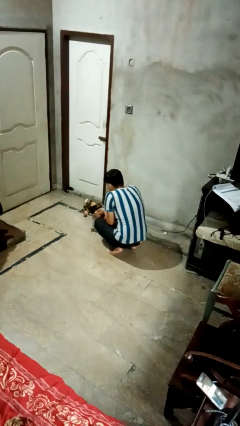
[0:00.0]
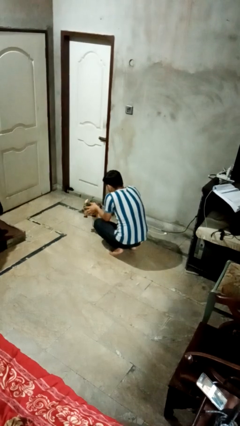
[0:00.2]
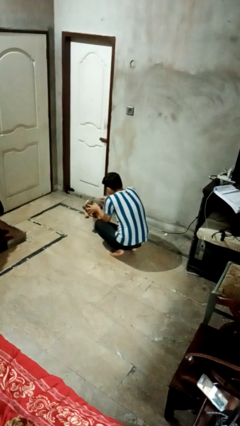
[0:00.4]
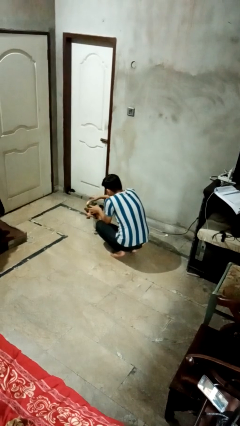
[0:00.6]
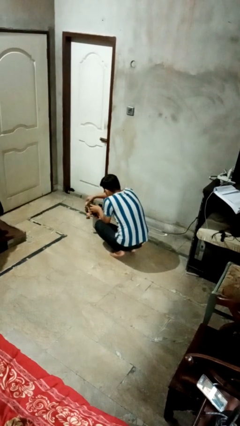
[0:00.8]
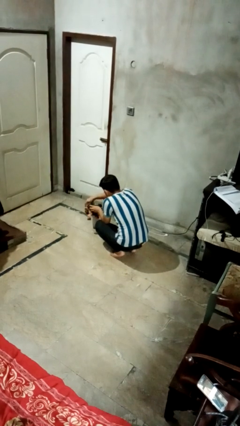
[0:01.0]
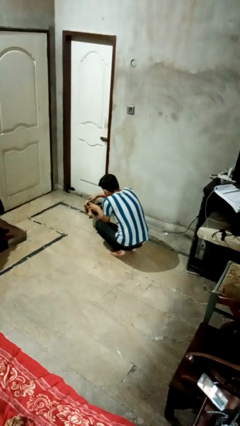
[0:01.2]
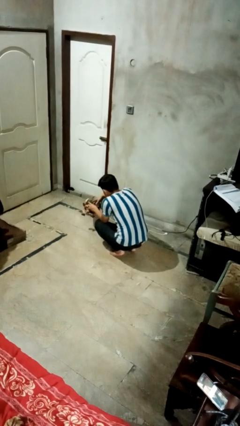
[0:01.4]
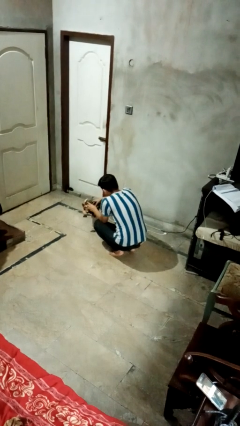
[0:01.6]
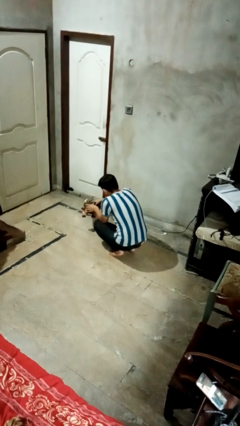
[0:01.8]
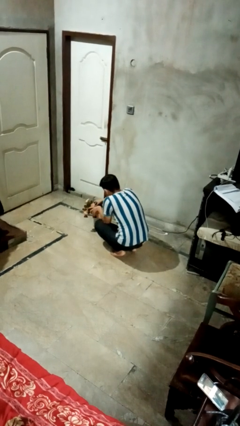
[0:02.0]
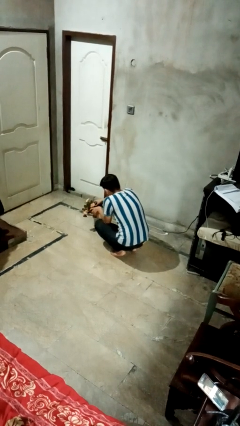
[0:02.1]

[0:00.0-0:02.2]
person arranges flowers in vase

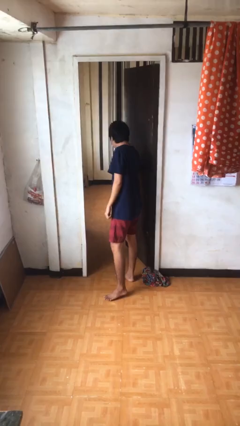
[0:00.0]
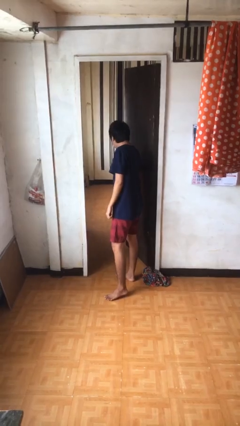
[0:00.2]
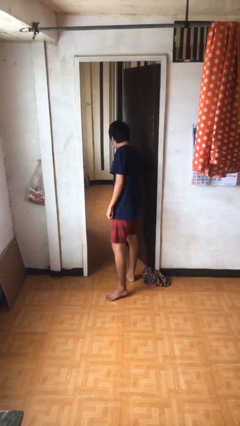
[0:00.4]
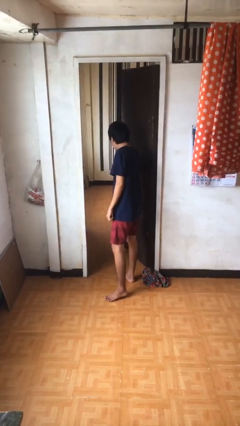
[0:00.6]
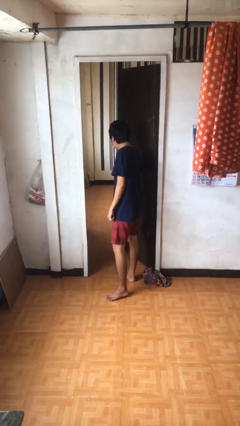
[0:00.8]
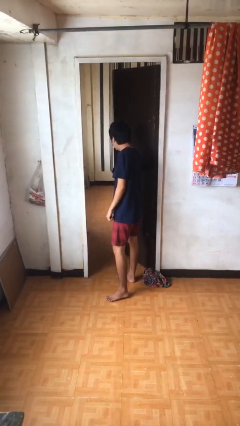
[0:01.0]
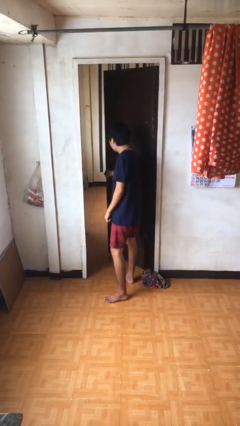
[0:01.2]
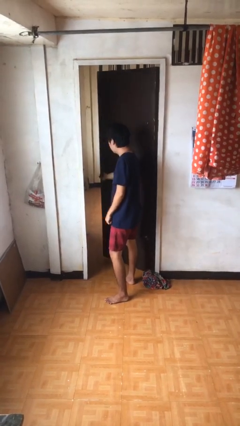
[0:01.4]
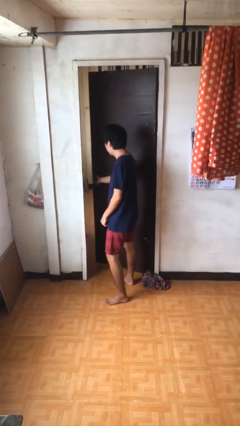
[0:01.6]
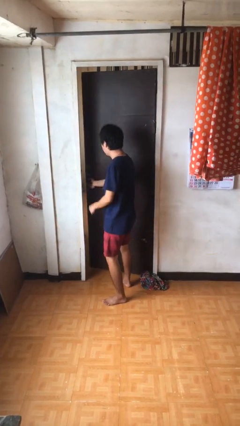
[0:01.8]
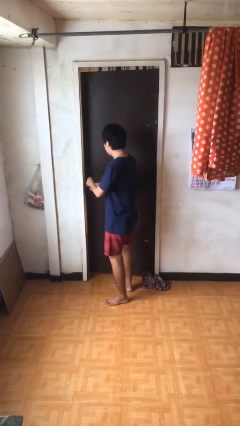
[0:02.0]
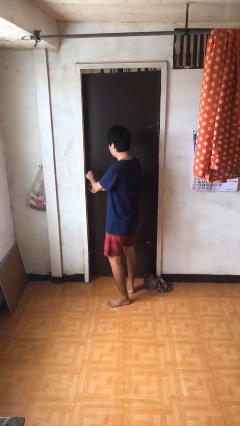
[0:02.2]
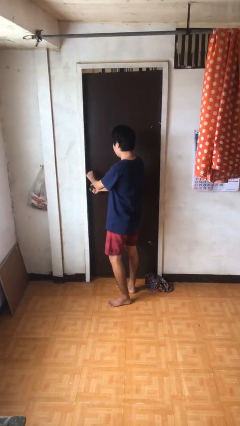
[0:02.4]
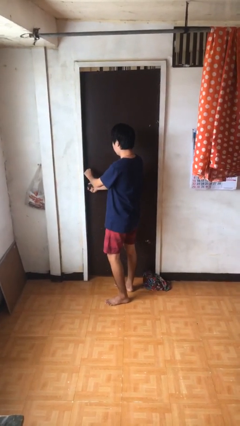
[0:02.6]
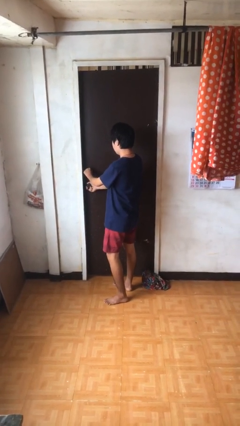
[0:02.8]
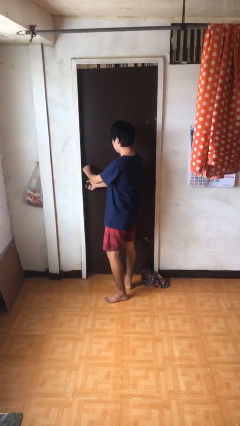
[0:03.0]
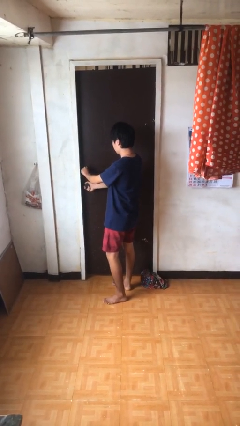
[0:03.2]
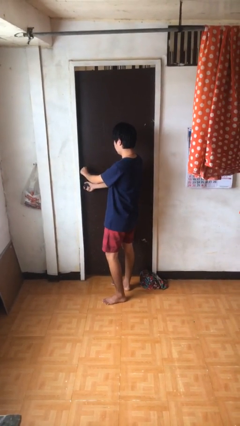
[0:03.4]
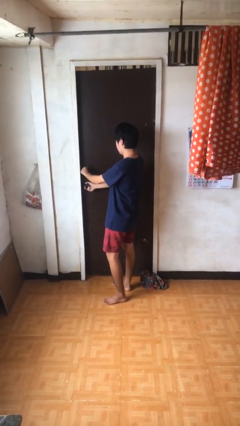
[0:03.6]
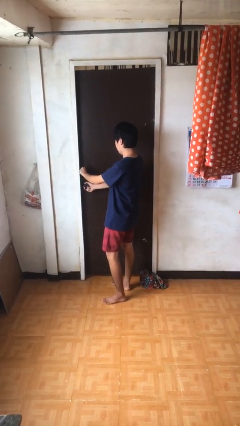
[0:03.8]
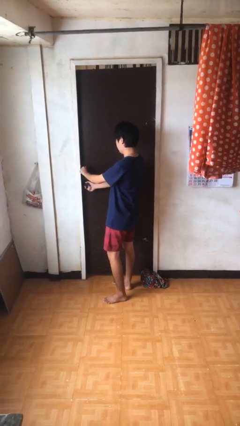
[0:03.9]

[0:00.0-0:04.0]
person closes facility door

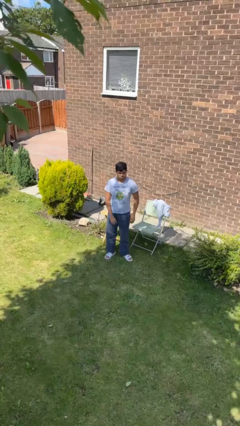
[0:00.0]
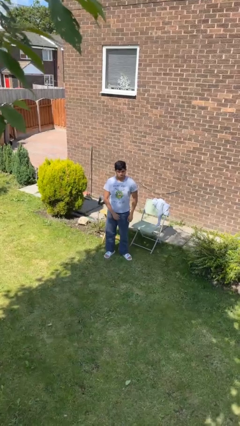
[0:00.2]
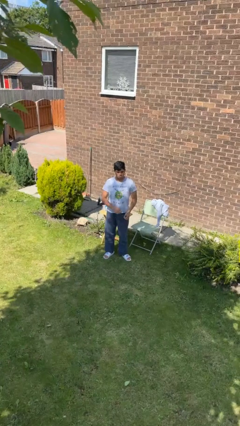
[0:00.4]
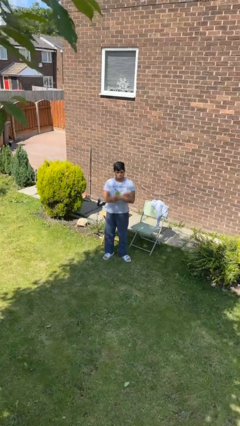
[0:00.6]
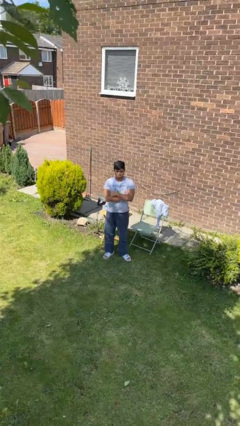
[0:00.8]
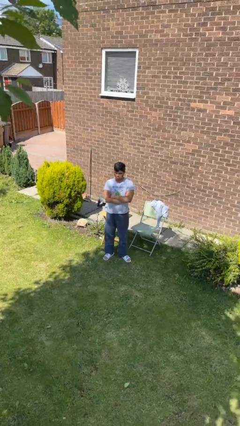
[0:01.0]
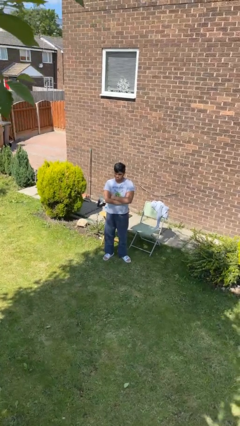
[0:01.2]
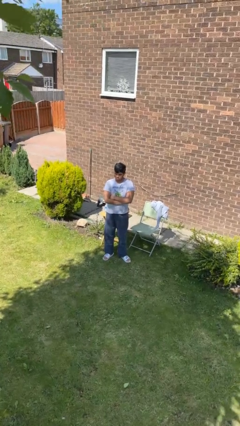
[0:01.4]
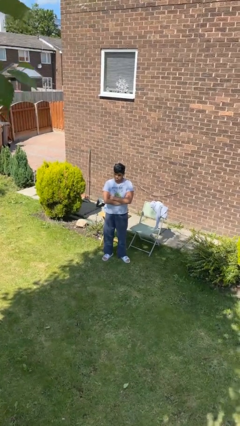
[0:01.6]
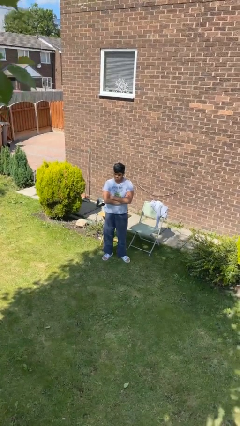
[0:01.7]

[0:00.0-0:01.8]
person crosses arms

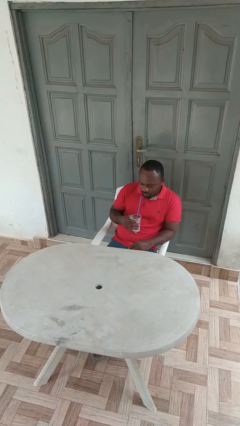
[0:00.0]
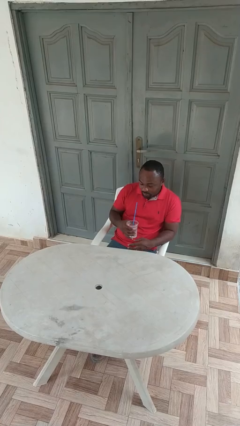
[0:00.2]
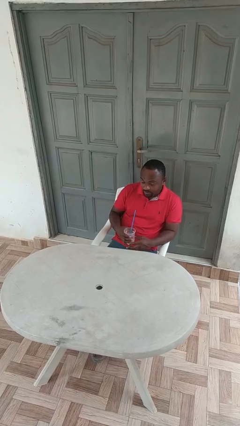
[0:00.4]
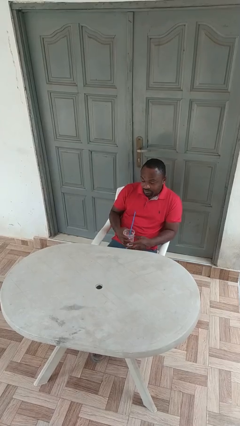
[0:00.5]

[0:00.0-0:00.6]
person drinks from straw

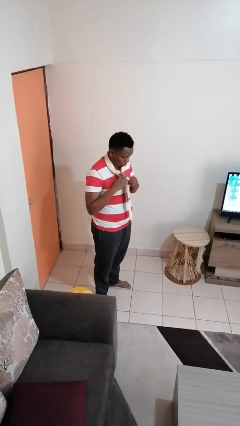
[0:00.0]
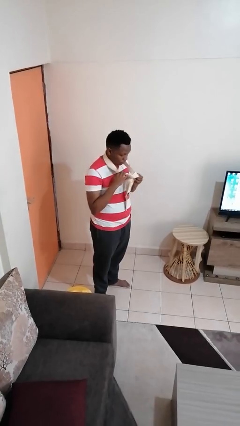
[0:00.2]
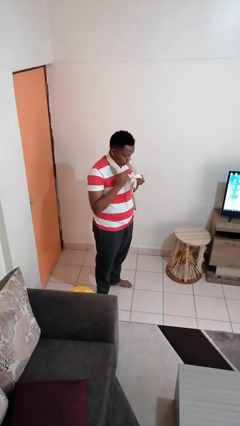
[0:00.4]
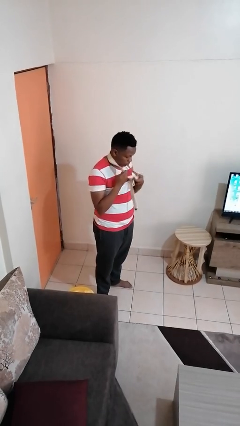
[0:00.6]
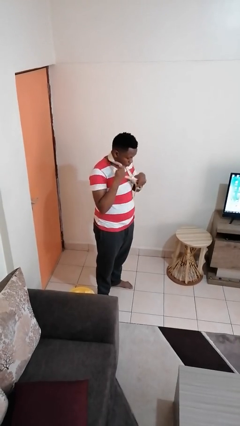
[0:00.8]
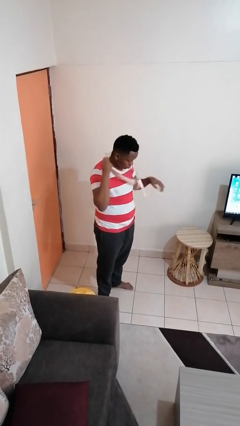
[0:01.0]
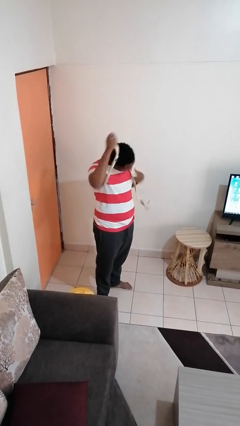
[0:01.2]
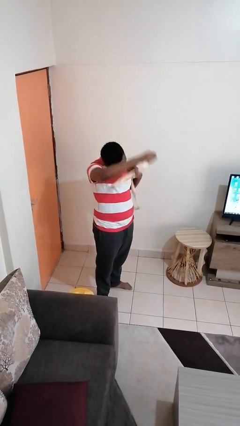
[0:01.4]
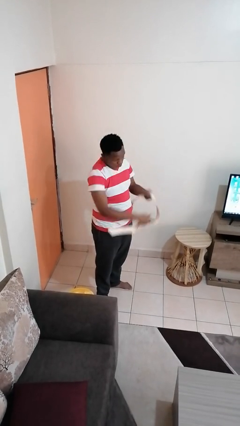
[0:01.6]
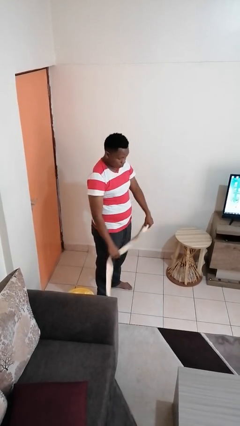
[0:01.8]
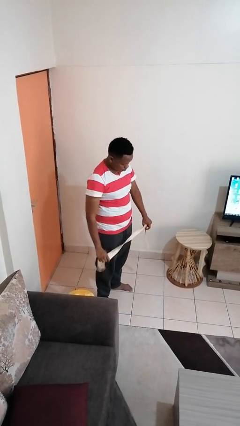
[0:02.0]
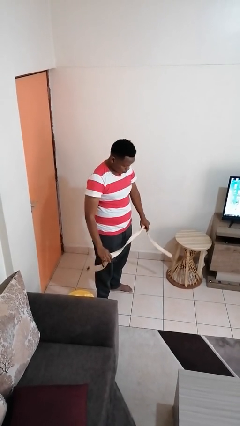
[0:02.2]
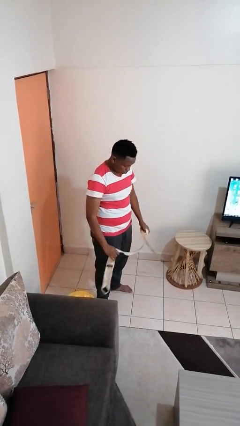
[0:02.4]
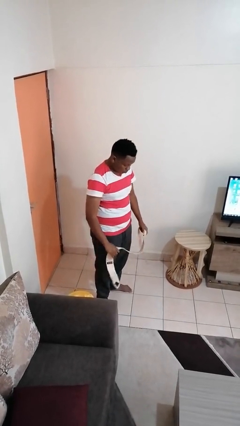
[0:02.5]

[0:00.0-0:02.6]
person takes off necktie

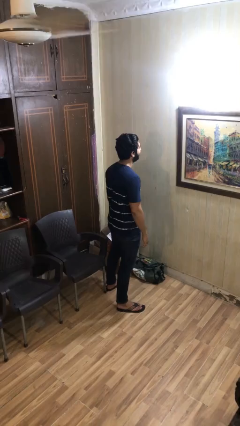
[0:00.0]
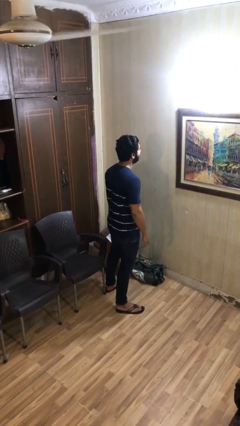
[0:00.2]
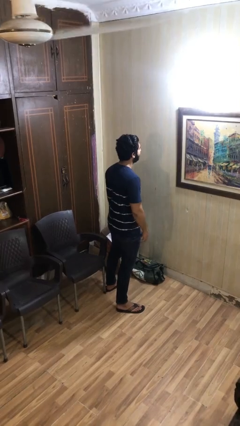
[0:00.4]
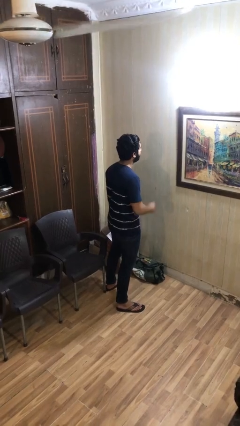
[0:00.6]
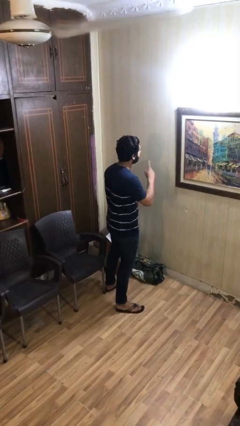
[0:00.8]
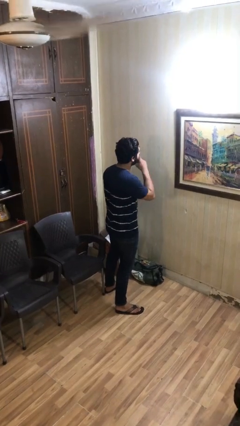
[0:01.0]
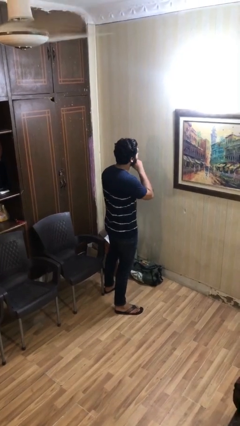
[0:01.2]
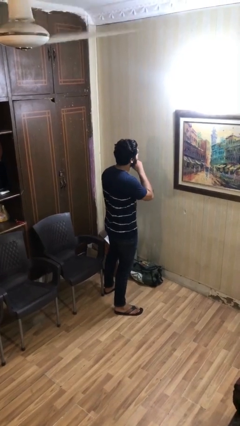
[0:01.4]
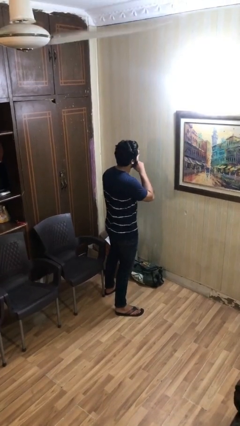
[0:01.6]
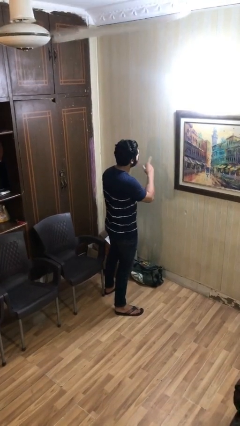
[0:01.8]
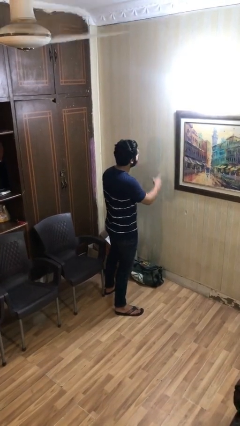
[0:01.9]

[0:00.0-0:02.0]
person gestures be quiet

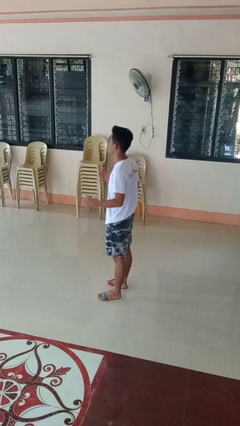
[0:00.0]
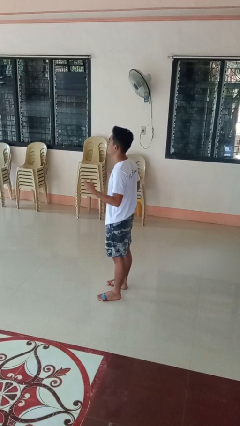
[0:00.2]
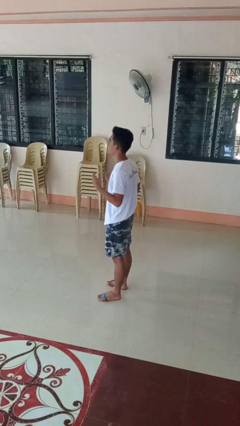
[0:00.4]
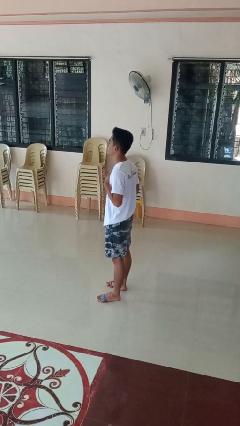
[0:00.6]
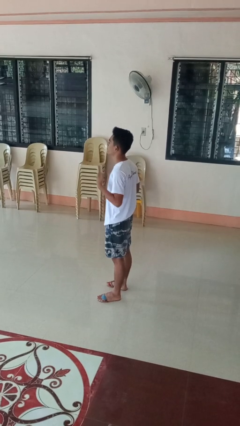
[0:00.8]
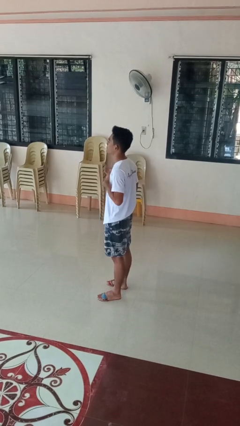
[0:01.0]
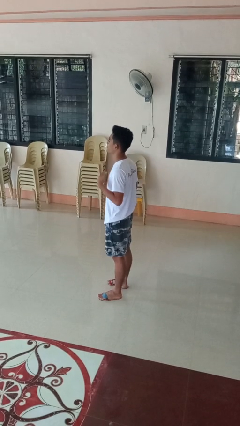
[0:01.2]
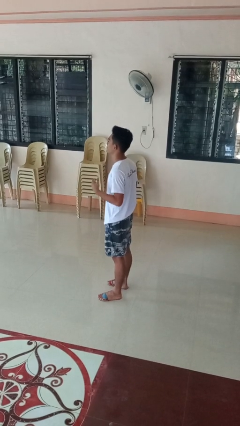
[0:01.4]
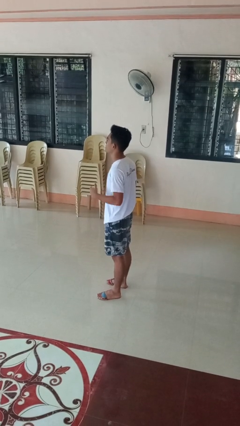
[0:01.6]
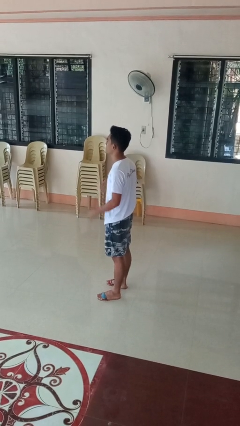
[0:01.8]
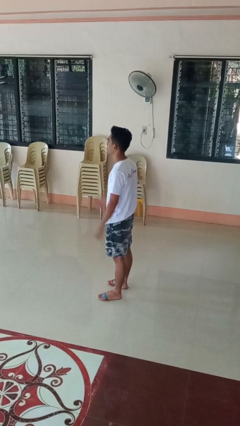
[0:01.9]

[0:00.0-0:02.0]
person drums on chest

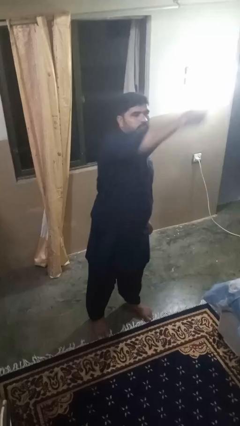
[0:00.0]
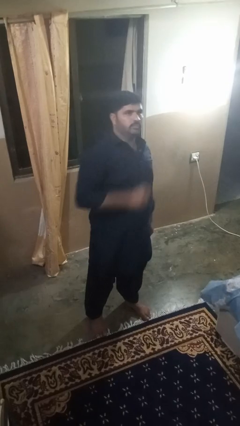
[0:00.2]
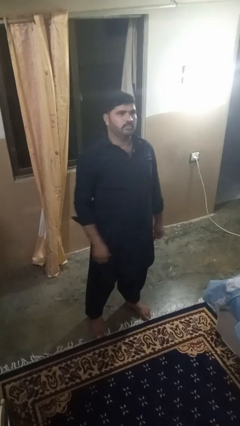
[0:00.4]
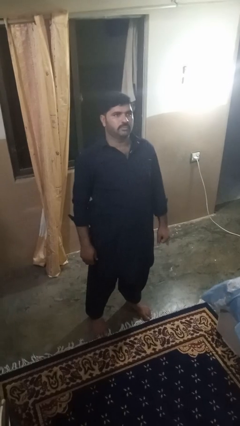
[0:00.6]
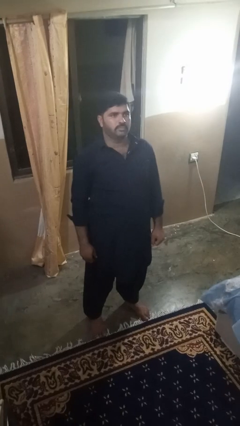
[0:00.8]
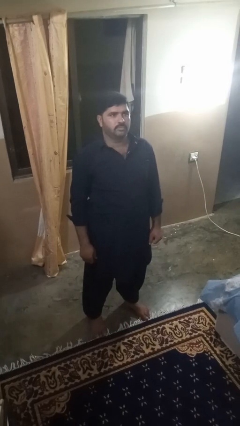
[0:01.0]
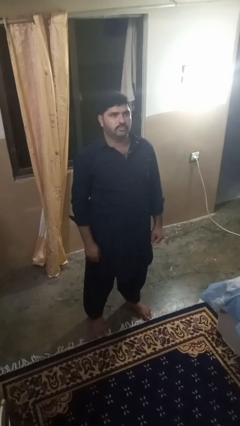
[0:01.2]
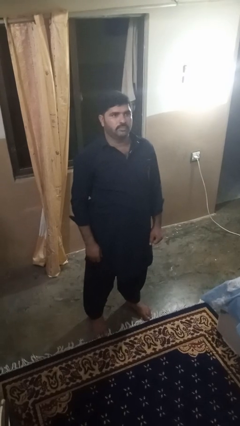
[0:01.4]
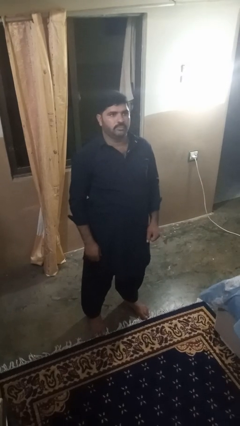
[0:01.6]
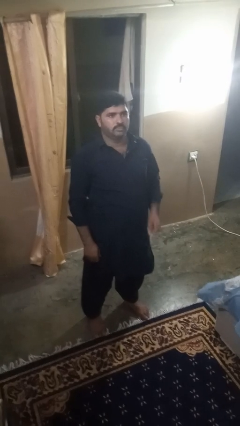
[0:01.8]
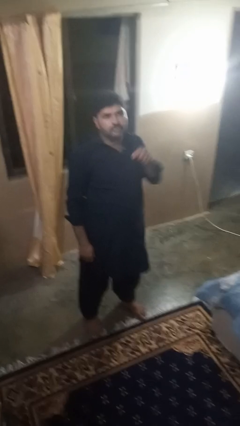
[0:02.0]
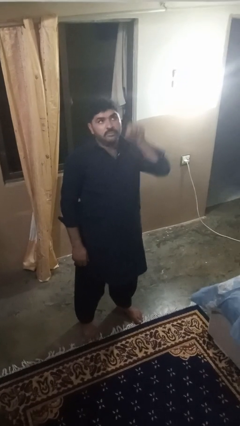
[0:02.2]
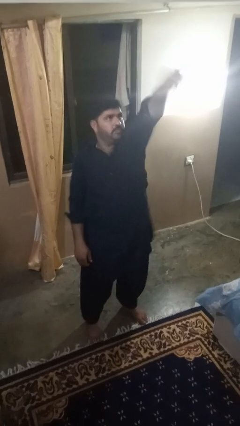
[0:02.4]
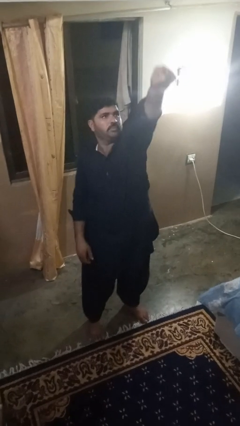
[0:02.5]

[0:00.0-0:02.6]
person punches
